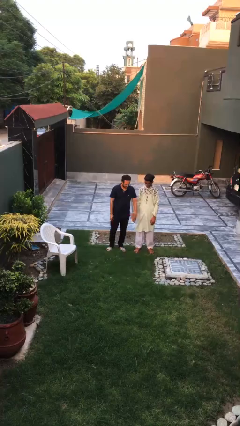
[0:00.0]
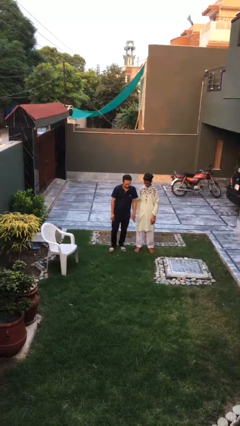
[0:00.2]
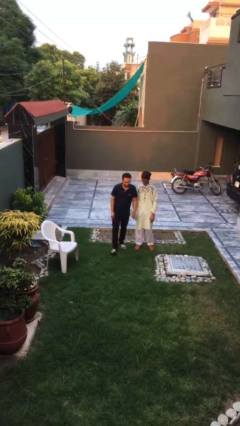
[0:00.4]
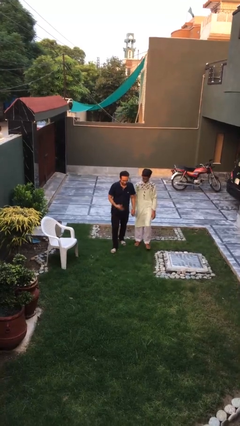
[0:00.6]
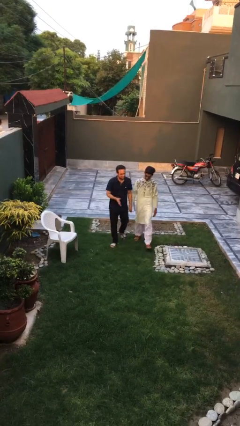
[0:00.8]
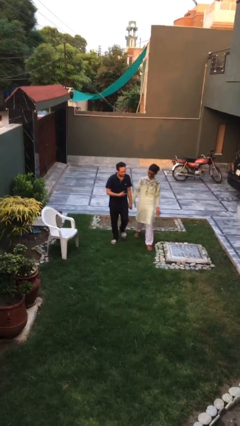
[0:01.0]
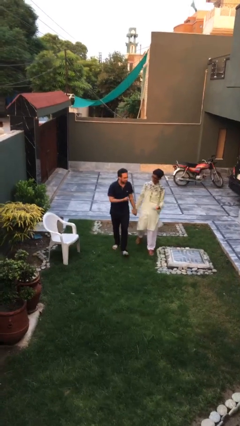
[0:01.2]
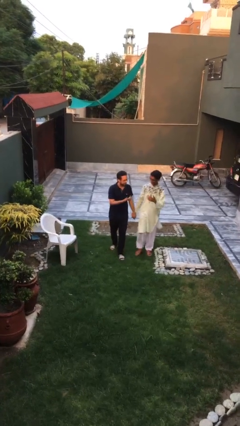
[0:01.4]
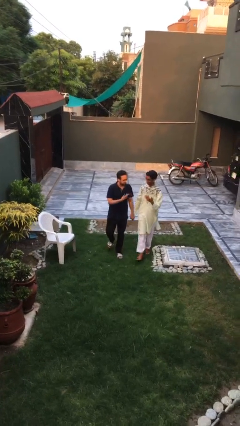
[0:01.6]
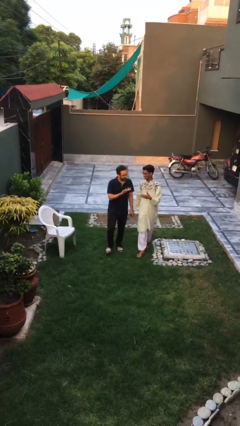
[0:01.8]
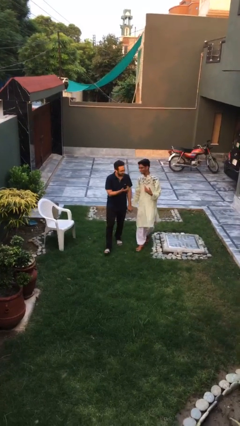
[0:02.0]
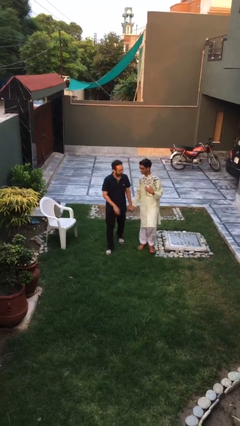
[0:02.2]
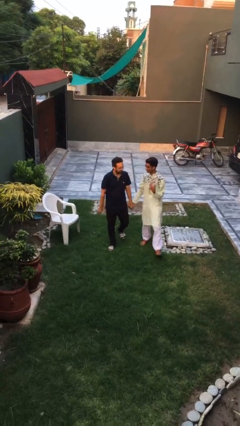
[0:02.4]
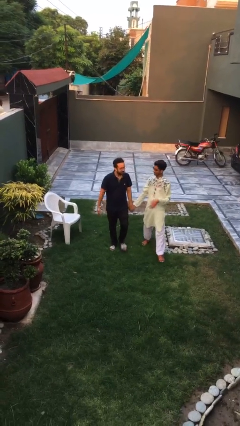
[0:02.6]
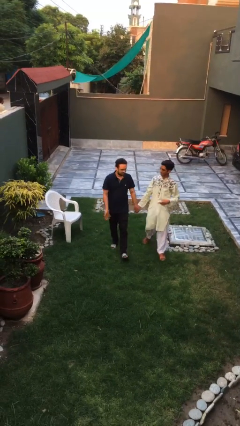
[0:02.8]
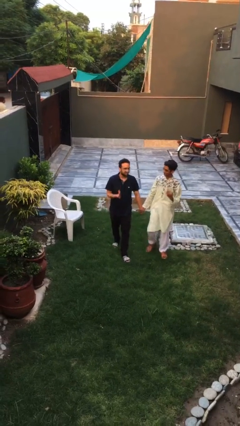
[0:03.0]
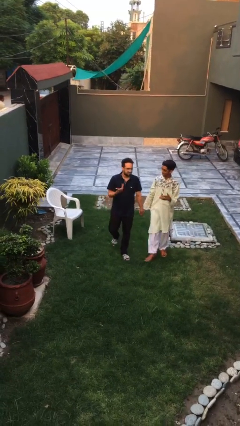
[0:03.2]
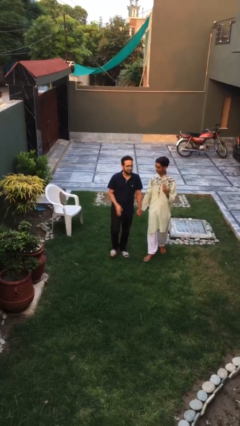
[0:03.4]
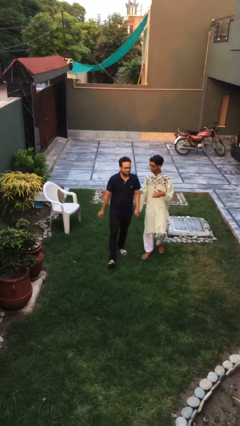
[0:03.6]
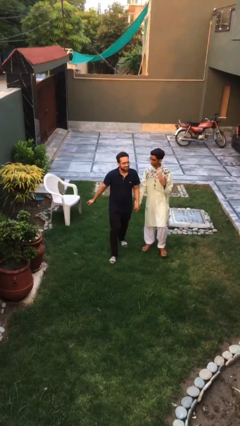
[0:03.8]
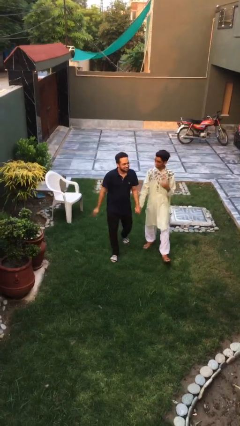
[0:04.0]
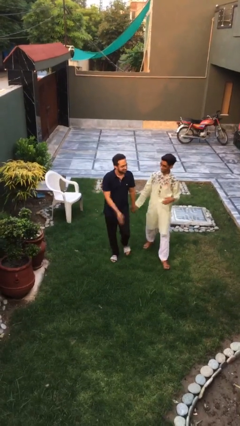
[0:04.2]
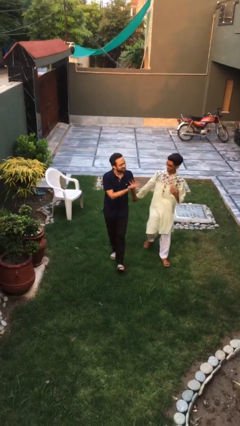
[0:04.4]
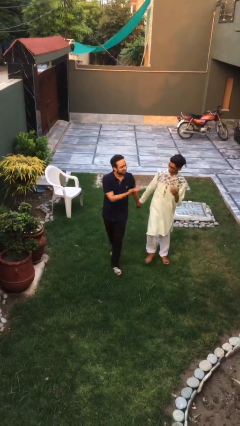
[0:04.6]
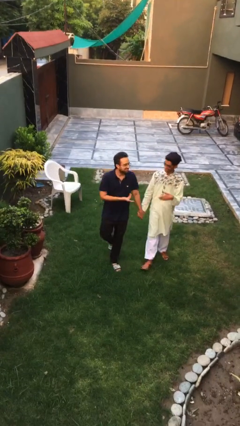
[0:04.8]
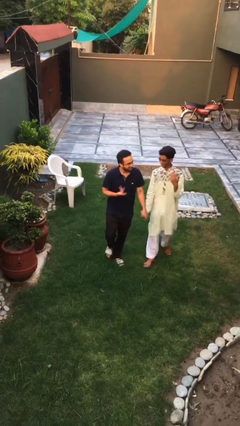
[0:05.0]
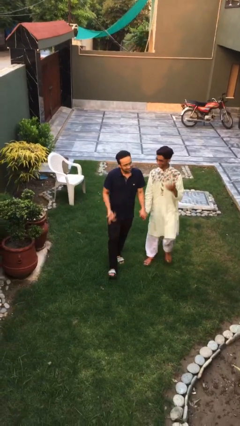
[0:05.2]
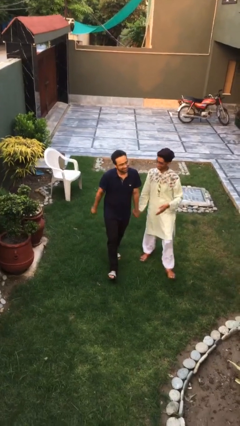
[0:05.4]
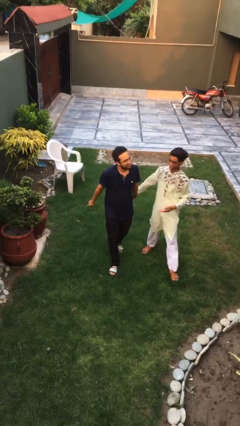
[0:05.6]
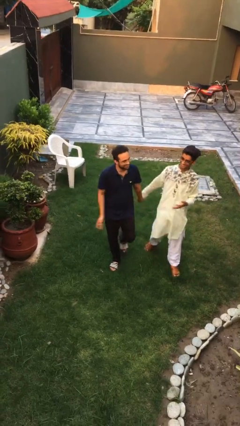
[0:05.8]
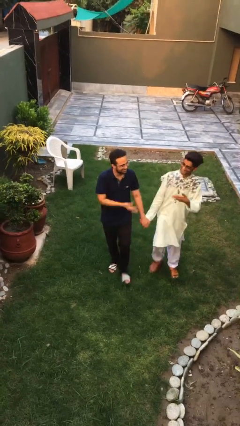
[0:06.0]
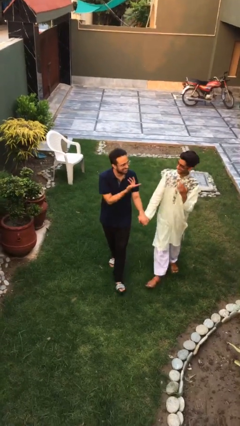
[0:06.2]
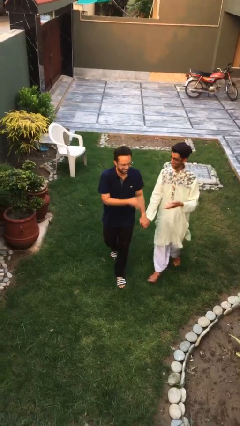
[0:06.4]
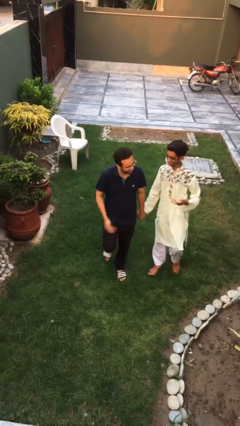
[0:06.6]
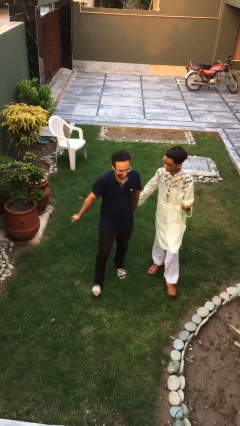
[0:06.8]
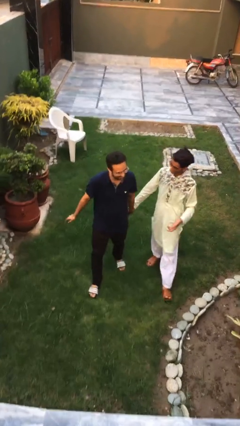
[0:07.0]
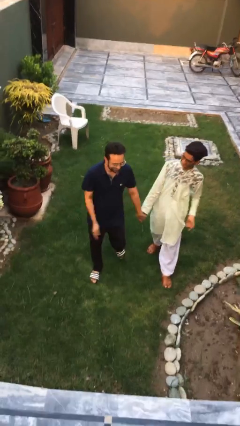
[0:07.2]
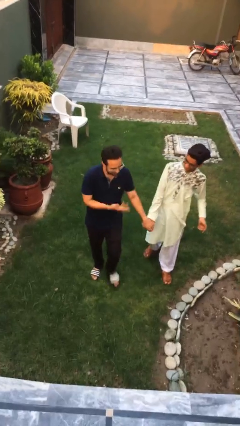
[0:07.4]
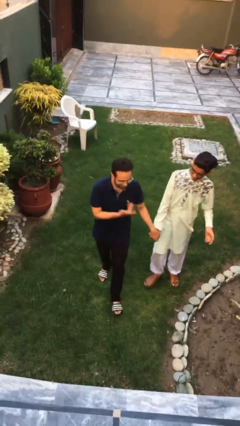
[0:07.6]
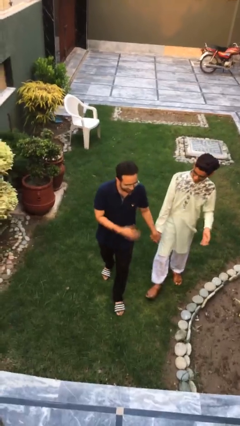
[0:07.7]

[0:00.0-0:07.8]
person holds hand

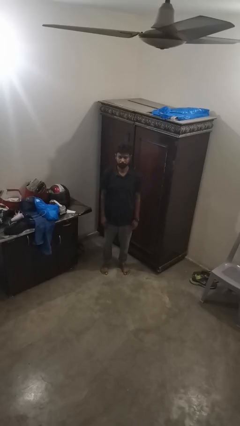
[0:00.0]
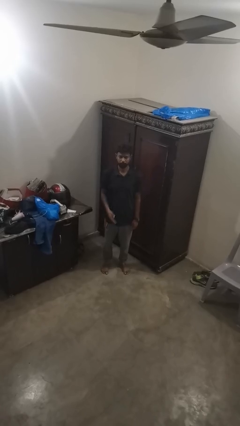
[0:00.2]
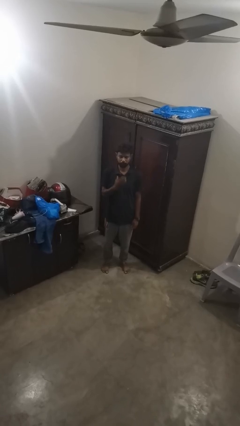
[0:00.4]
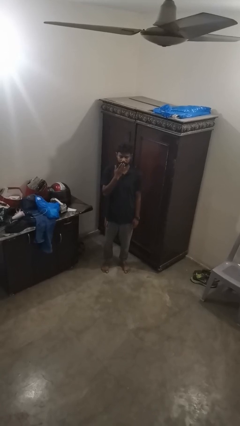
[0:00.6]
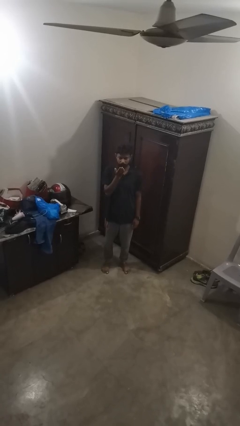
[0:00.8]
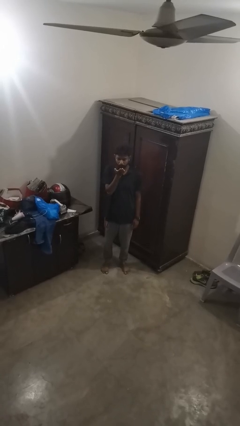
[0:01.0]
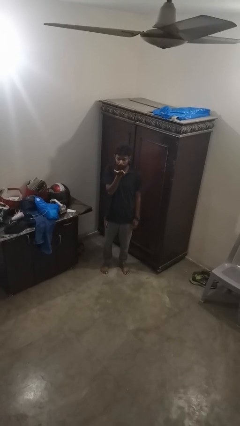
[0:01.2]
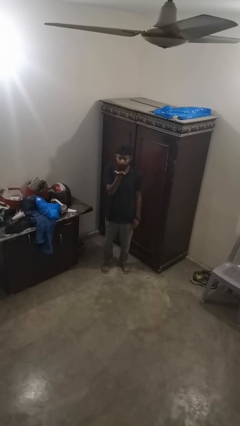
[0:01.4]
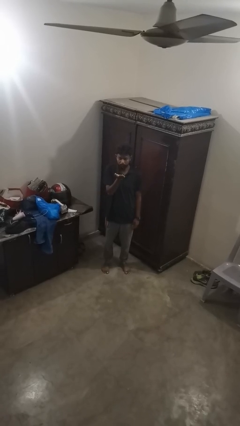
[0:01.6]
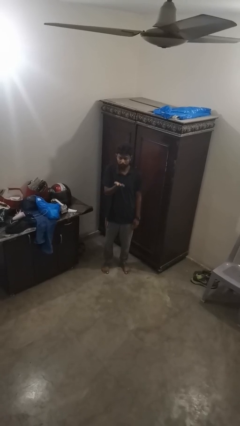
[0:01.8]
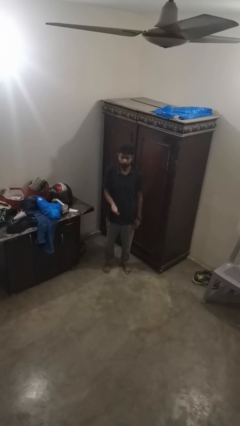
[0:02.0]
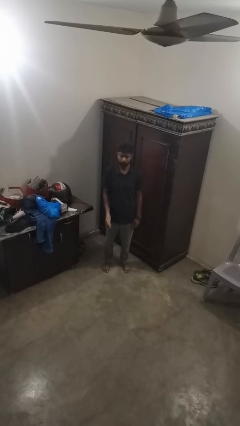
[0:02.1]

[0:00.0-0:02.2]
person gestures blow kiss

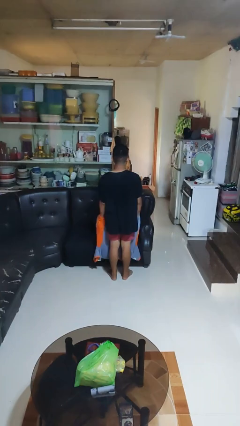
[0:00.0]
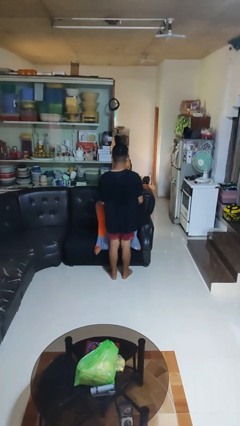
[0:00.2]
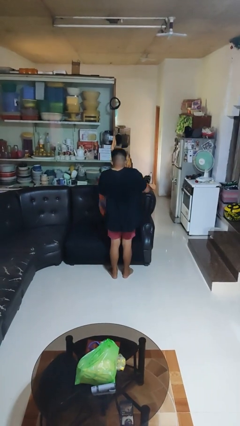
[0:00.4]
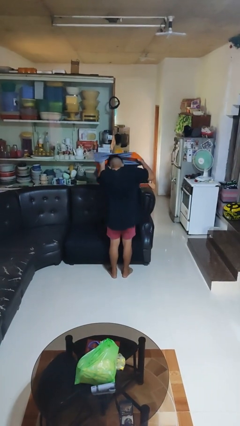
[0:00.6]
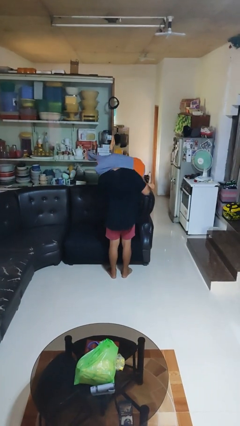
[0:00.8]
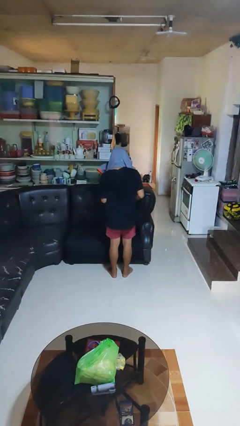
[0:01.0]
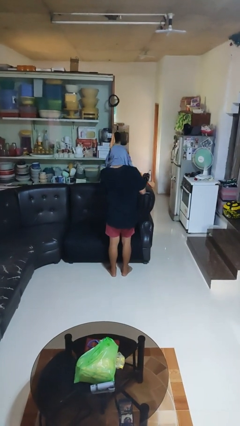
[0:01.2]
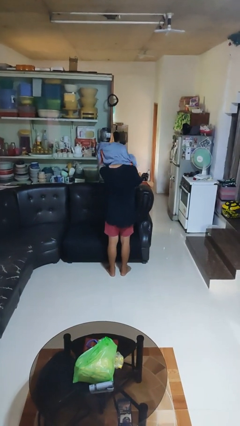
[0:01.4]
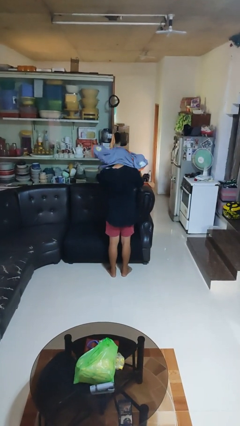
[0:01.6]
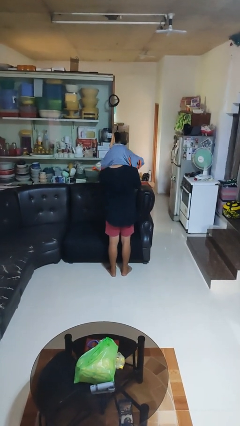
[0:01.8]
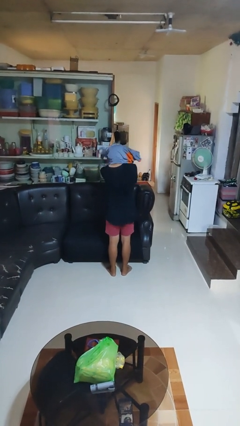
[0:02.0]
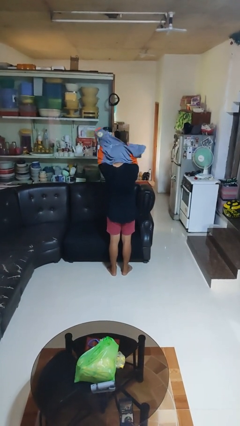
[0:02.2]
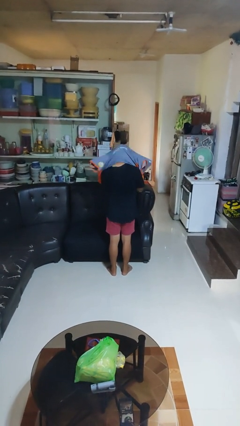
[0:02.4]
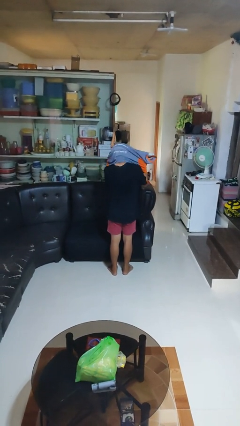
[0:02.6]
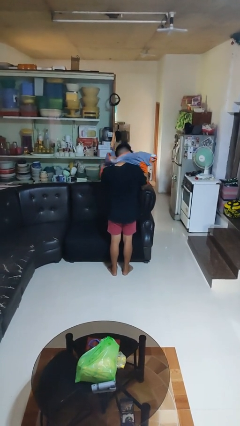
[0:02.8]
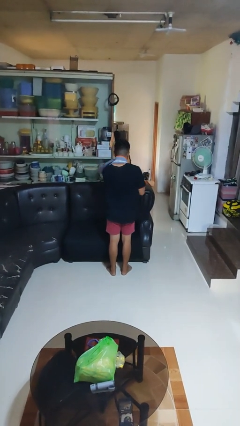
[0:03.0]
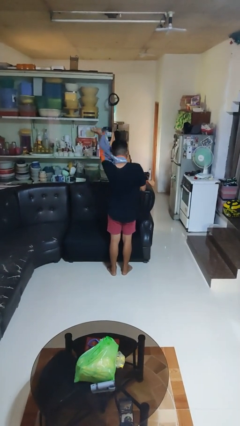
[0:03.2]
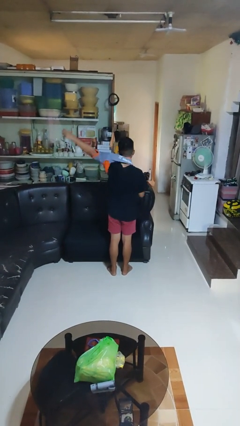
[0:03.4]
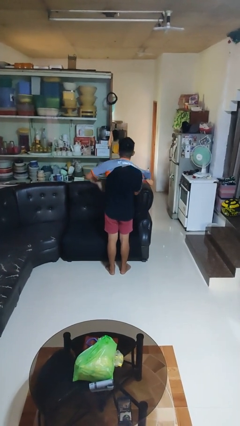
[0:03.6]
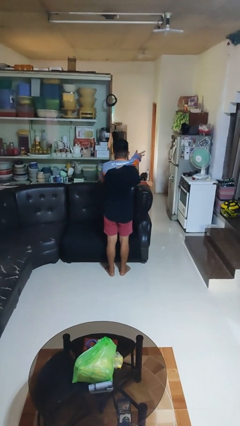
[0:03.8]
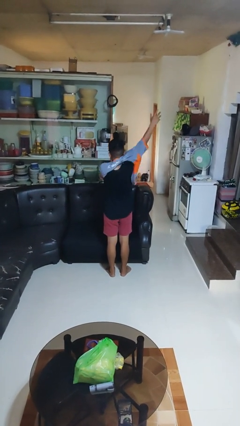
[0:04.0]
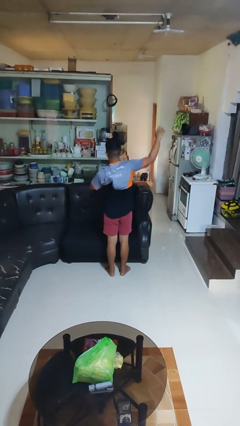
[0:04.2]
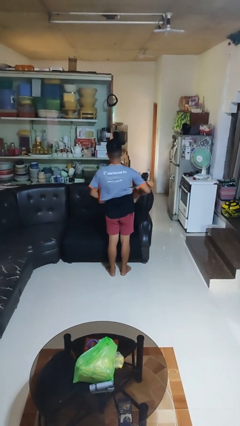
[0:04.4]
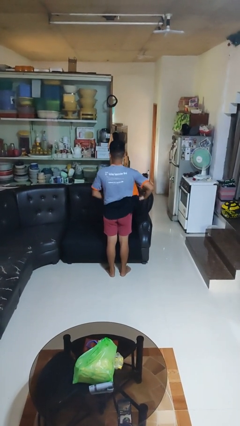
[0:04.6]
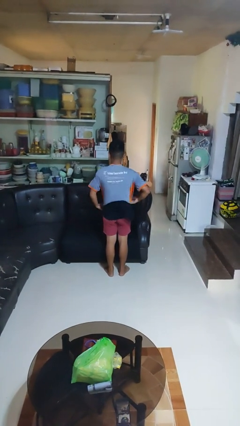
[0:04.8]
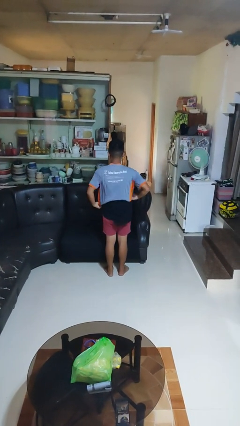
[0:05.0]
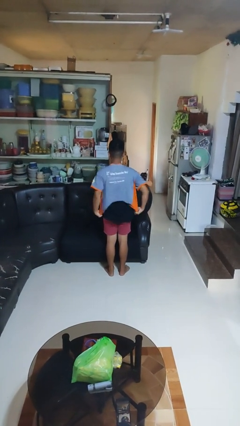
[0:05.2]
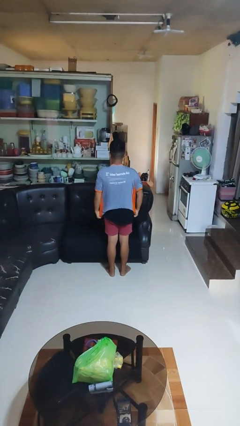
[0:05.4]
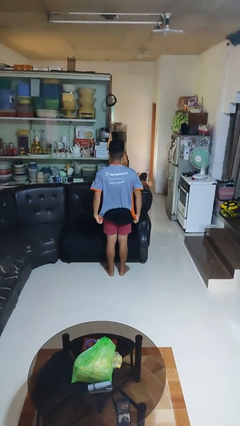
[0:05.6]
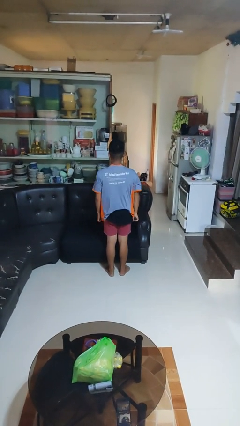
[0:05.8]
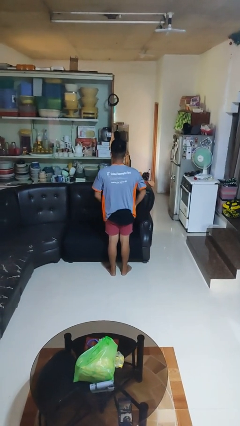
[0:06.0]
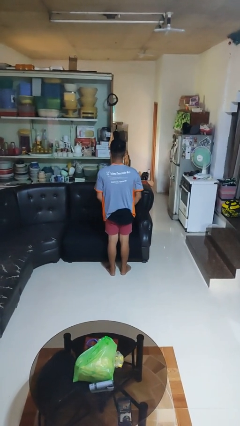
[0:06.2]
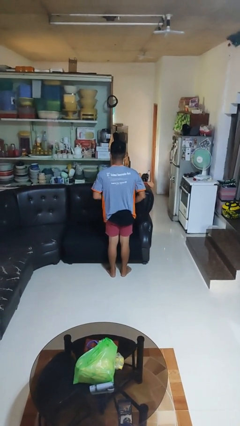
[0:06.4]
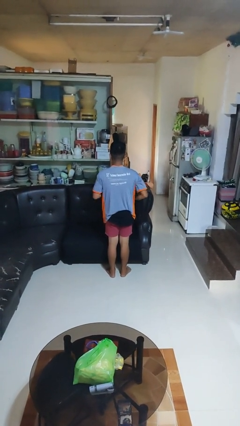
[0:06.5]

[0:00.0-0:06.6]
person puts on shirt

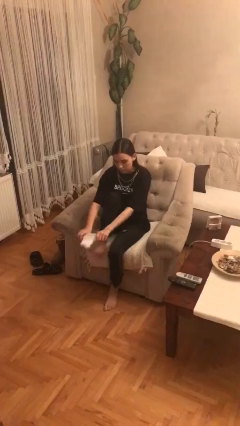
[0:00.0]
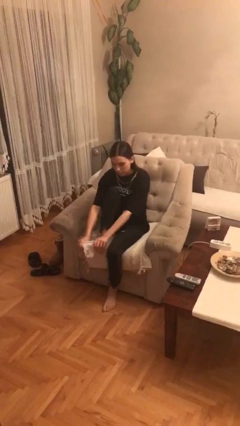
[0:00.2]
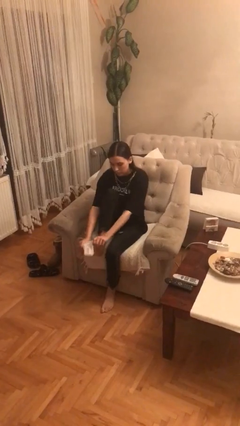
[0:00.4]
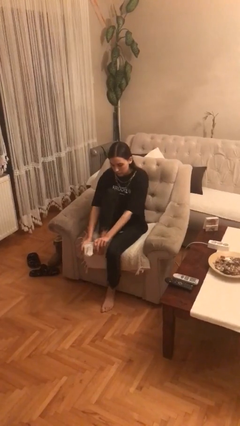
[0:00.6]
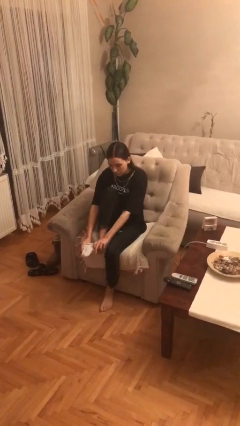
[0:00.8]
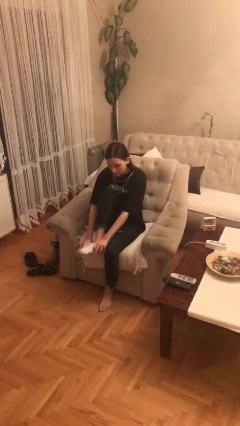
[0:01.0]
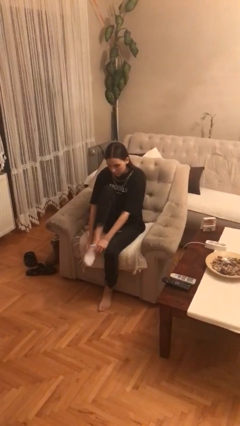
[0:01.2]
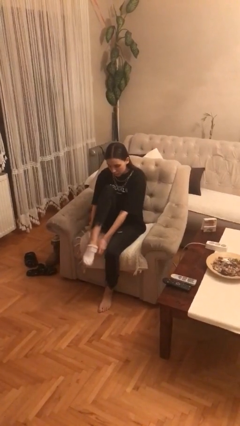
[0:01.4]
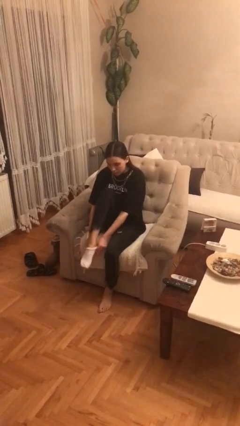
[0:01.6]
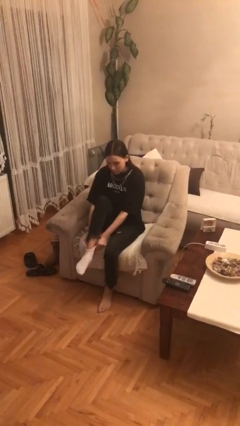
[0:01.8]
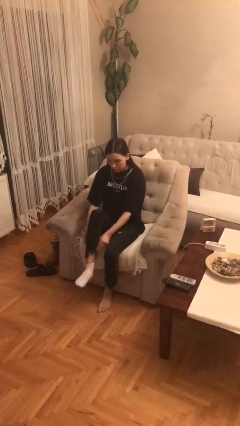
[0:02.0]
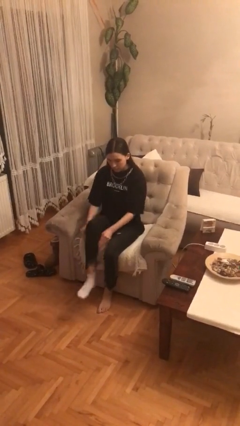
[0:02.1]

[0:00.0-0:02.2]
person puts on socks
